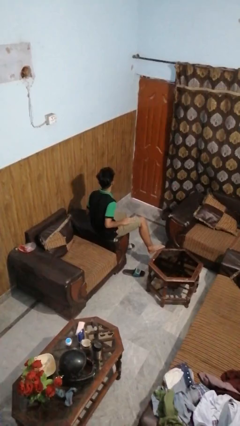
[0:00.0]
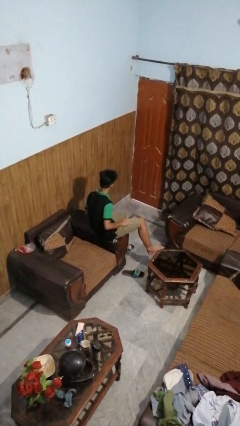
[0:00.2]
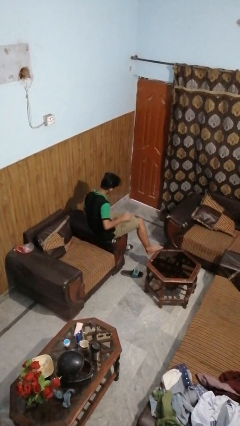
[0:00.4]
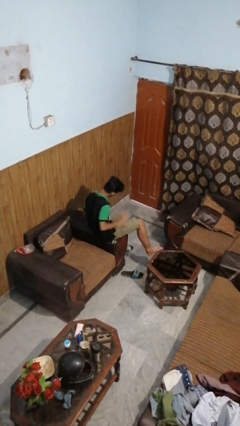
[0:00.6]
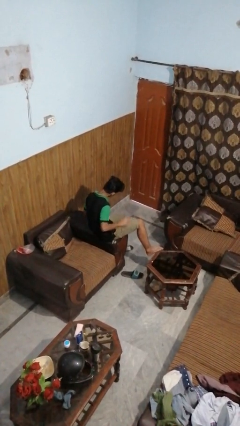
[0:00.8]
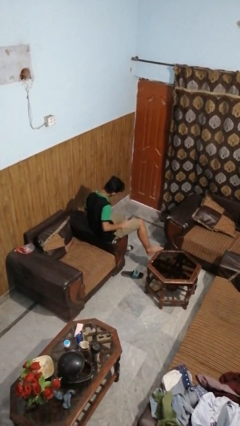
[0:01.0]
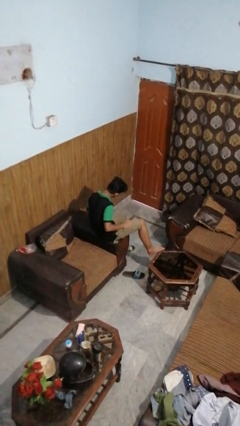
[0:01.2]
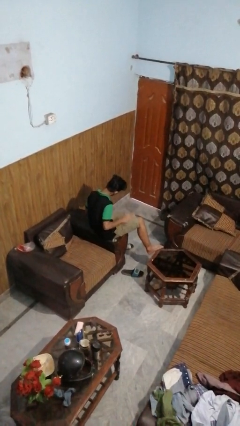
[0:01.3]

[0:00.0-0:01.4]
person slaps hands on thighs

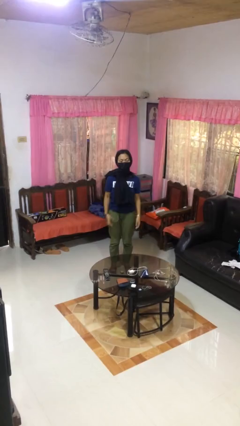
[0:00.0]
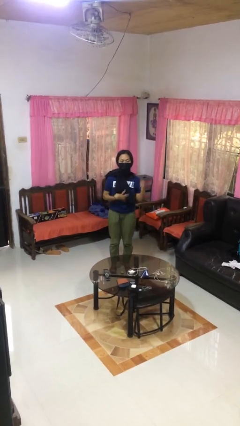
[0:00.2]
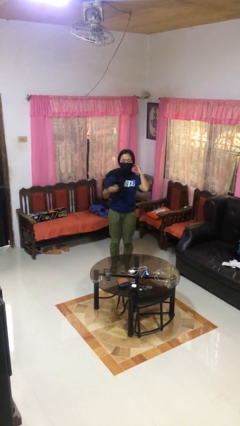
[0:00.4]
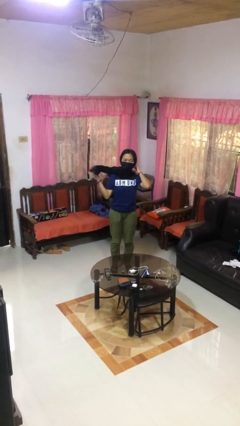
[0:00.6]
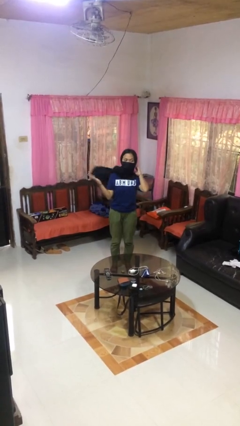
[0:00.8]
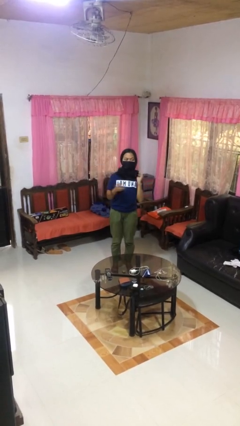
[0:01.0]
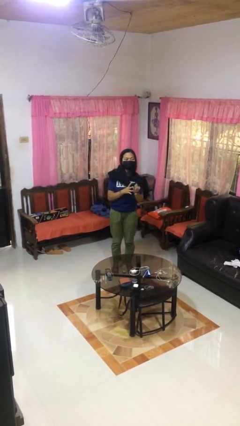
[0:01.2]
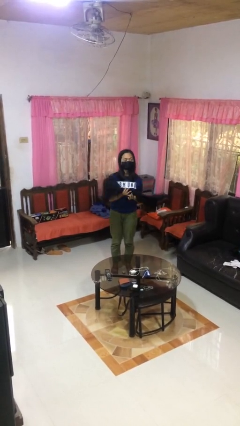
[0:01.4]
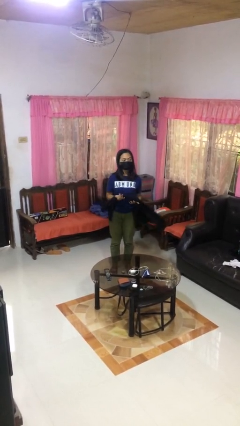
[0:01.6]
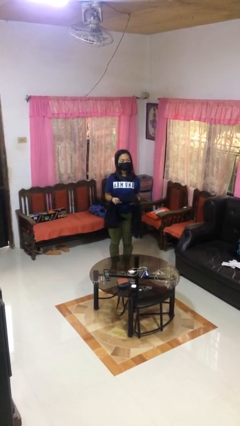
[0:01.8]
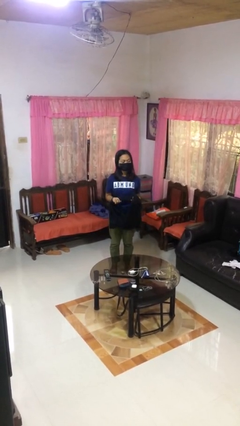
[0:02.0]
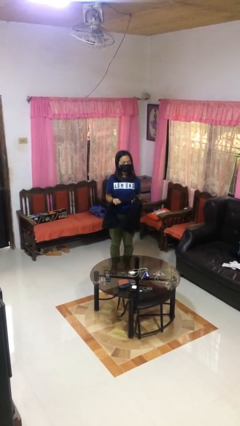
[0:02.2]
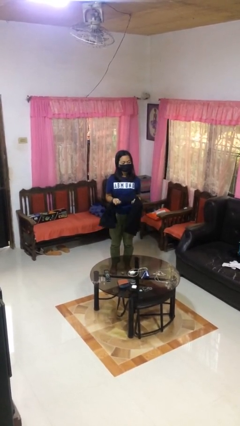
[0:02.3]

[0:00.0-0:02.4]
person takes off scarf

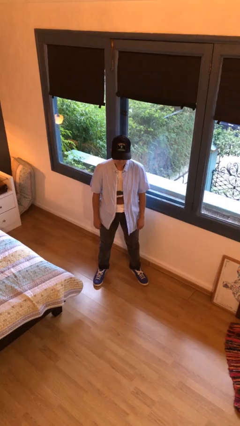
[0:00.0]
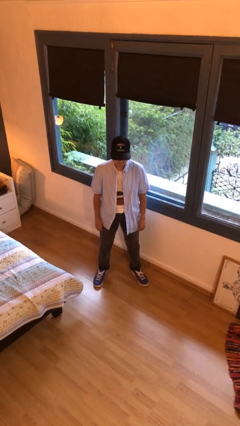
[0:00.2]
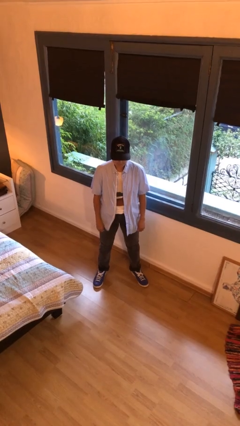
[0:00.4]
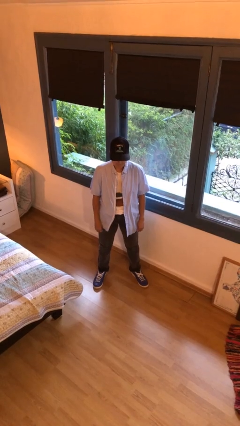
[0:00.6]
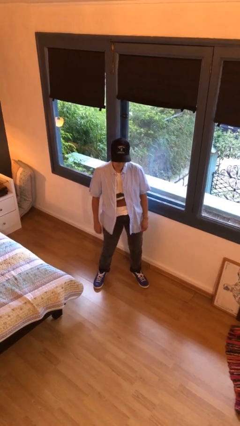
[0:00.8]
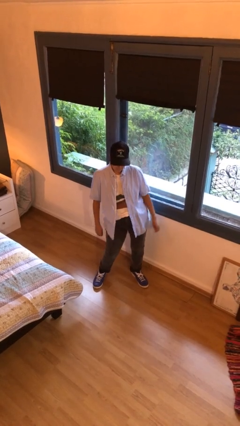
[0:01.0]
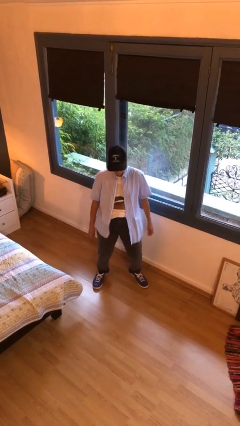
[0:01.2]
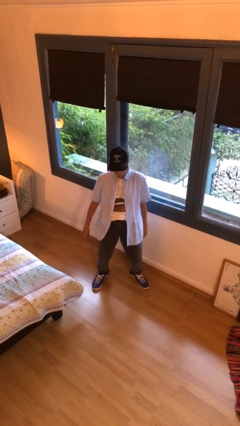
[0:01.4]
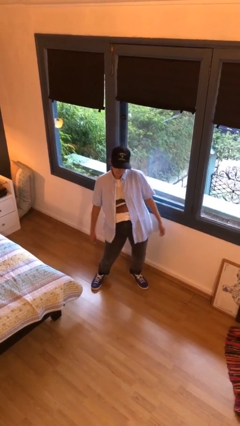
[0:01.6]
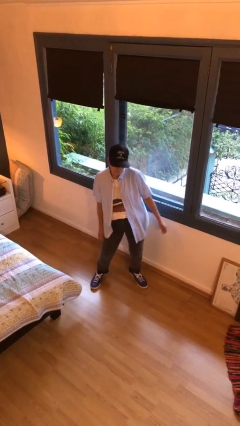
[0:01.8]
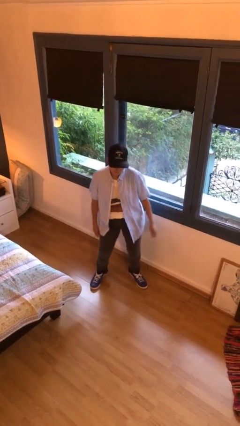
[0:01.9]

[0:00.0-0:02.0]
person wiggles hips

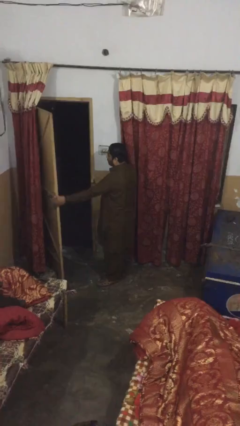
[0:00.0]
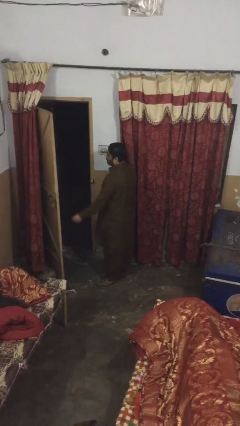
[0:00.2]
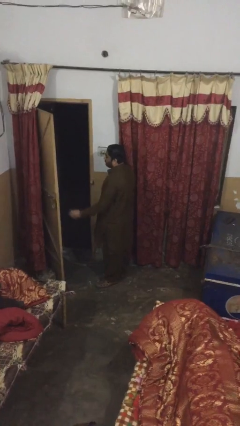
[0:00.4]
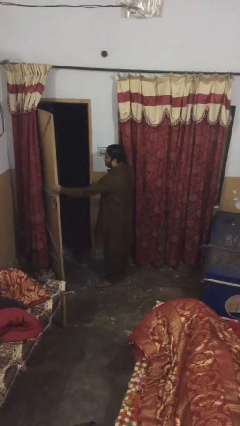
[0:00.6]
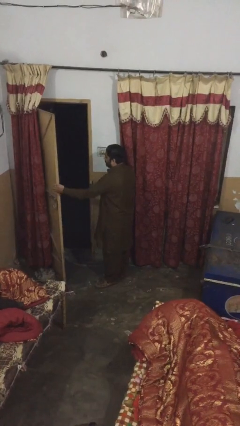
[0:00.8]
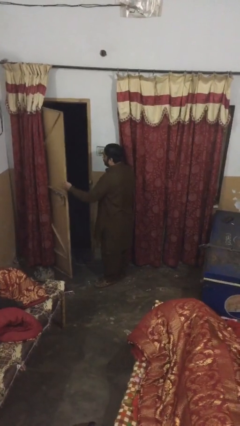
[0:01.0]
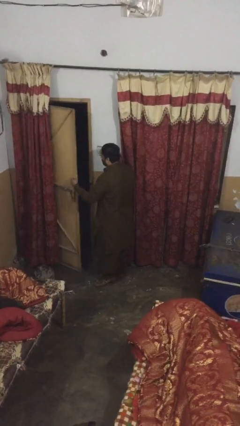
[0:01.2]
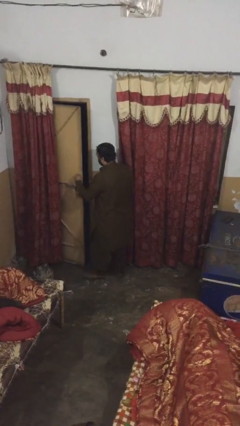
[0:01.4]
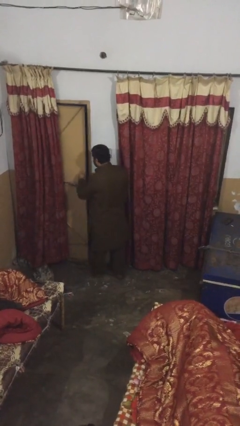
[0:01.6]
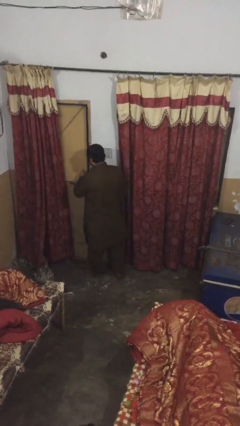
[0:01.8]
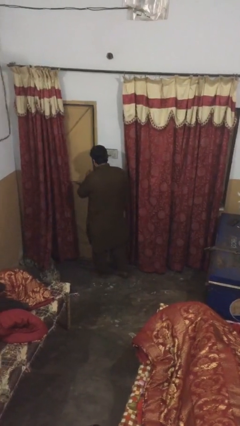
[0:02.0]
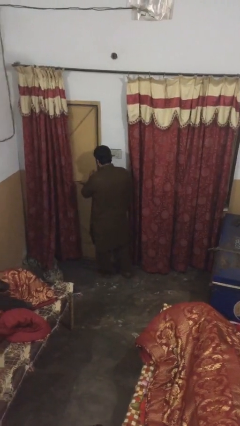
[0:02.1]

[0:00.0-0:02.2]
person closes facility door

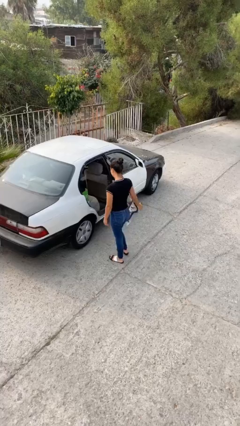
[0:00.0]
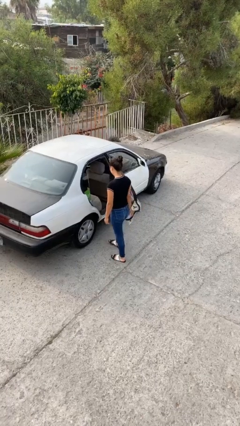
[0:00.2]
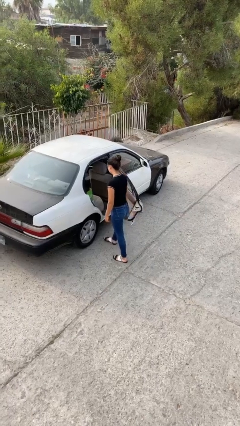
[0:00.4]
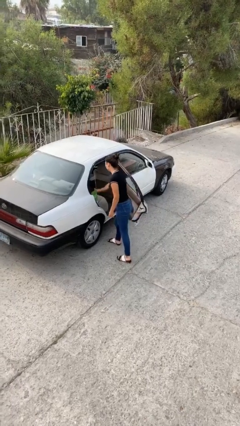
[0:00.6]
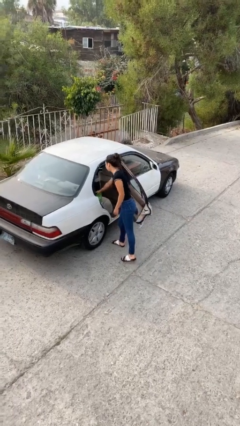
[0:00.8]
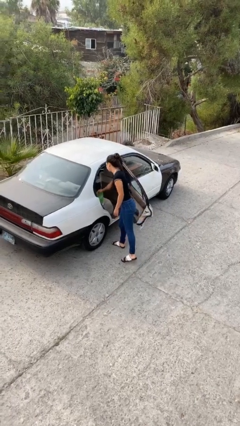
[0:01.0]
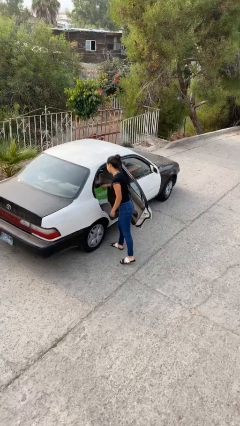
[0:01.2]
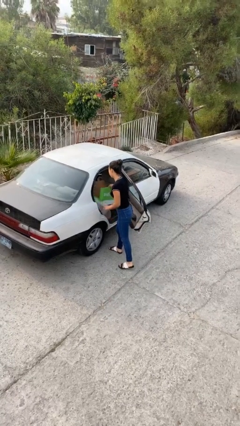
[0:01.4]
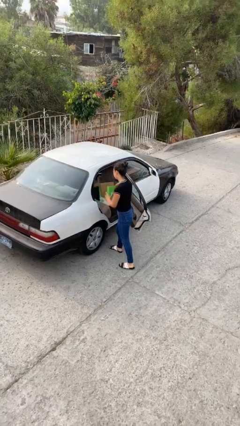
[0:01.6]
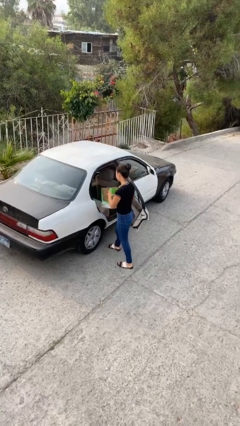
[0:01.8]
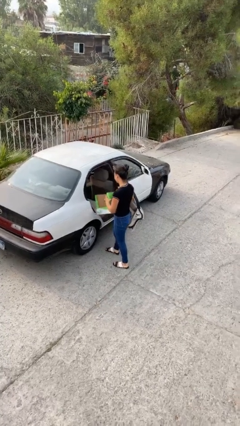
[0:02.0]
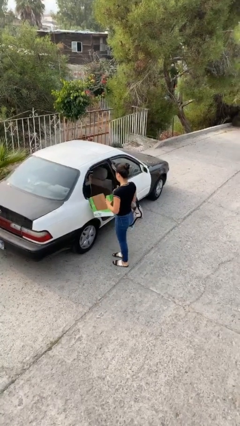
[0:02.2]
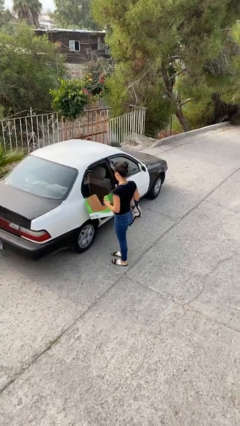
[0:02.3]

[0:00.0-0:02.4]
person unloads car

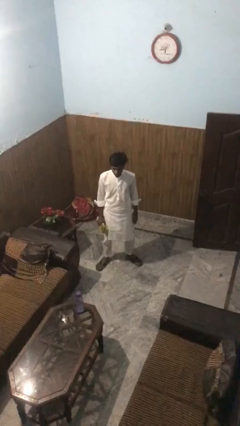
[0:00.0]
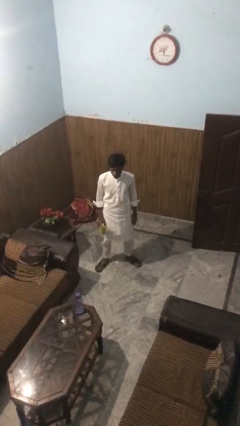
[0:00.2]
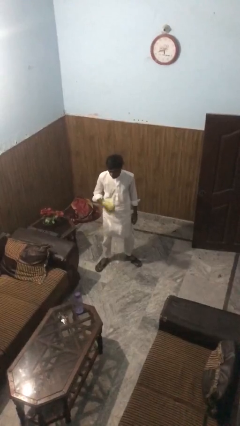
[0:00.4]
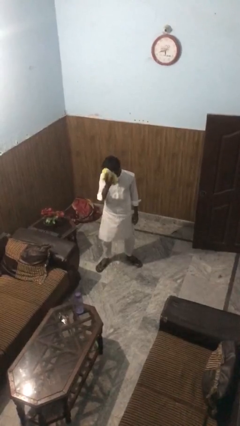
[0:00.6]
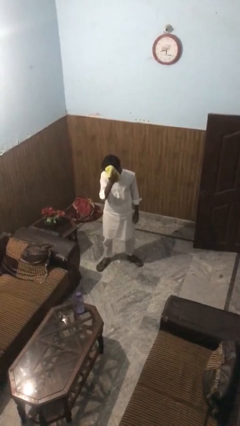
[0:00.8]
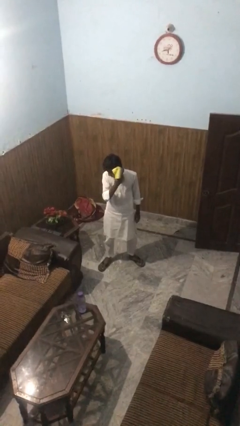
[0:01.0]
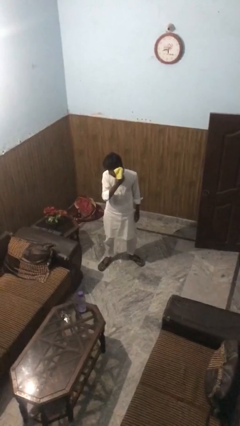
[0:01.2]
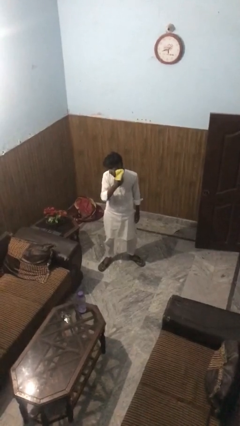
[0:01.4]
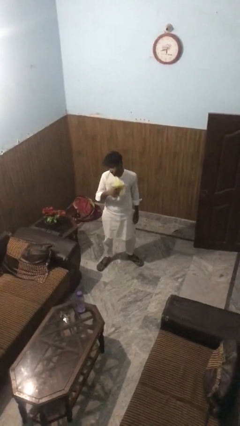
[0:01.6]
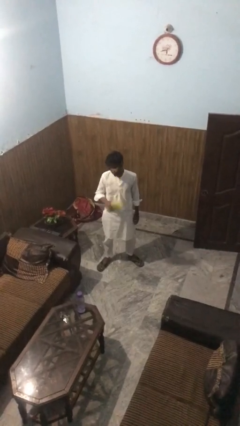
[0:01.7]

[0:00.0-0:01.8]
person wipes mouth with napkin

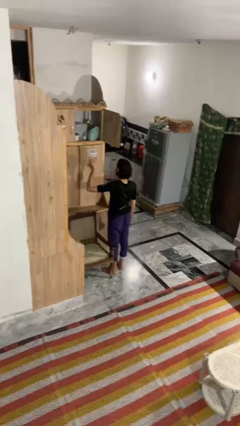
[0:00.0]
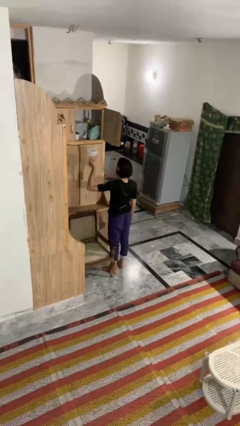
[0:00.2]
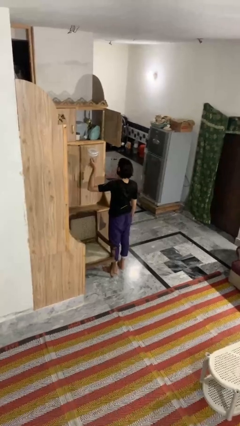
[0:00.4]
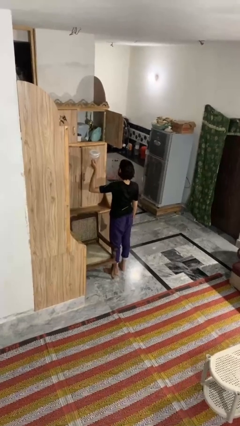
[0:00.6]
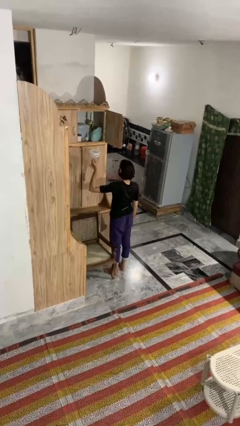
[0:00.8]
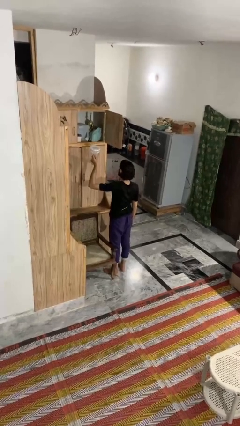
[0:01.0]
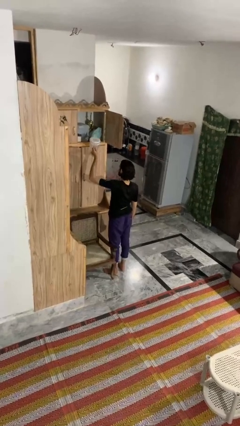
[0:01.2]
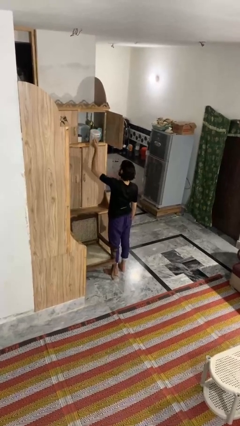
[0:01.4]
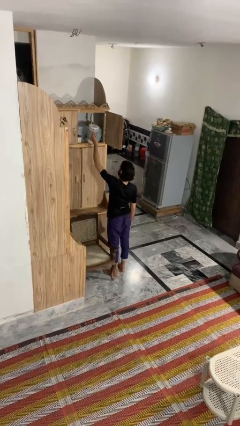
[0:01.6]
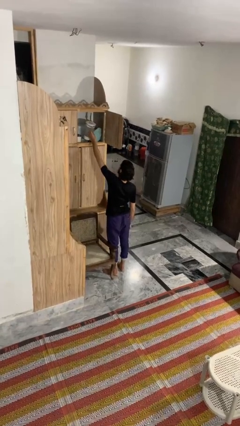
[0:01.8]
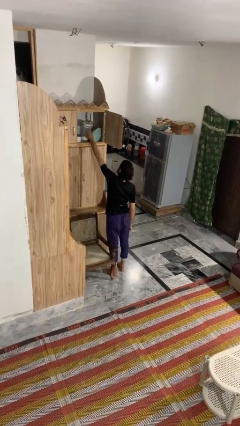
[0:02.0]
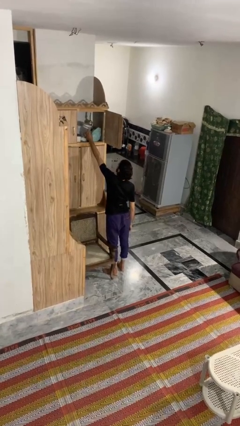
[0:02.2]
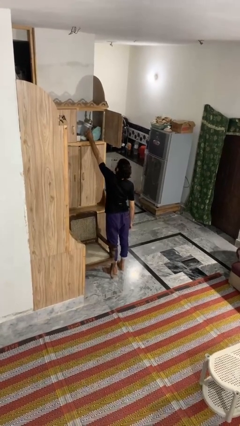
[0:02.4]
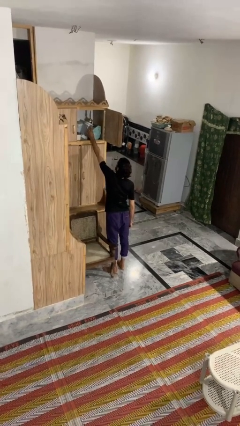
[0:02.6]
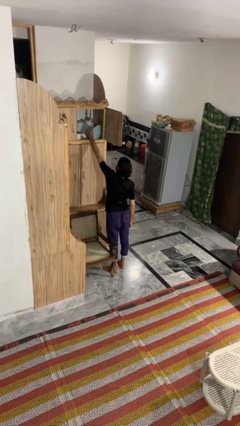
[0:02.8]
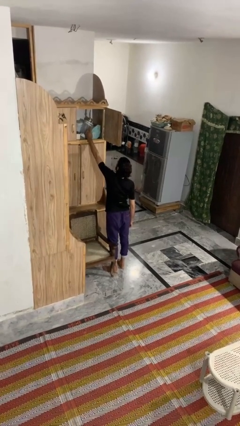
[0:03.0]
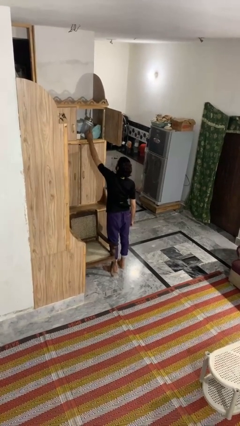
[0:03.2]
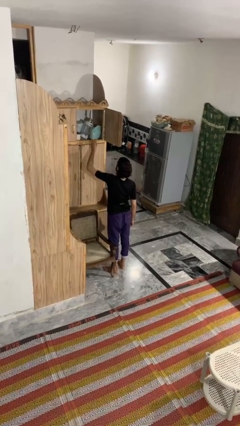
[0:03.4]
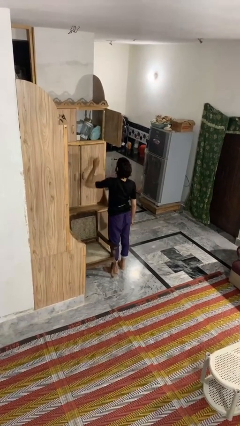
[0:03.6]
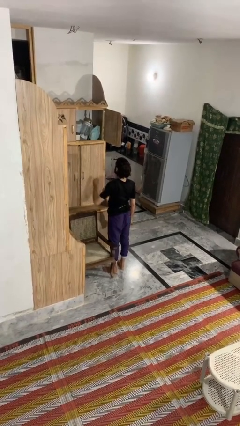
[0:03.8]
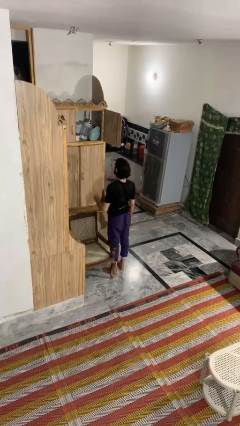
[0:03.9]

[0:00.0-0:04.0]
person puts down object on shelf

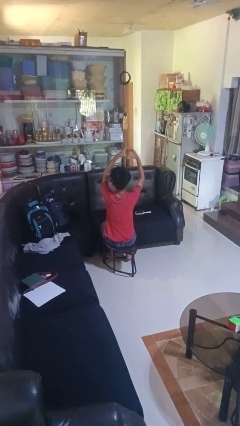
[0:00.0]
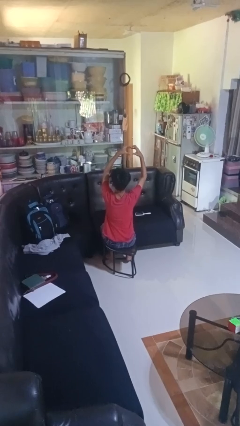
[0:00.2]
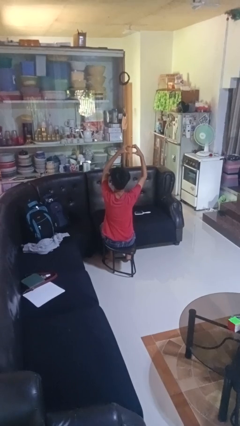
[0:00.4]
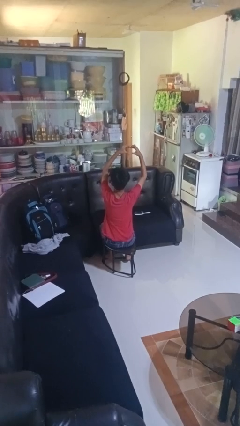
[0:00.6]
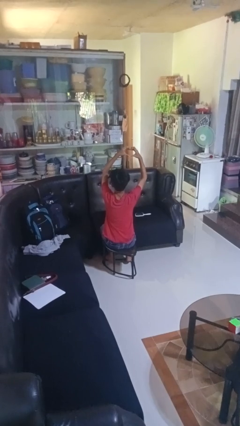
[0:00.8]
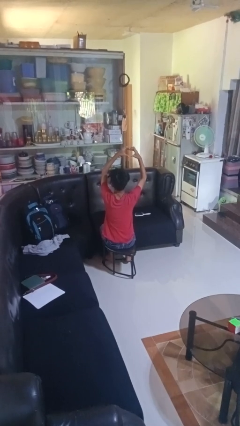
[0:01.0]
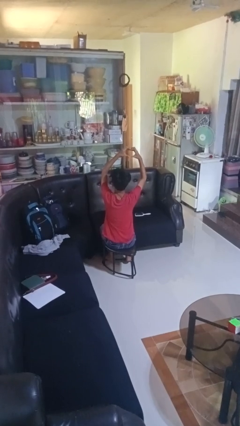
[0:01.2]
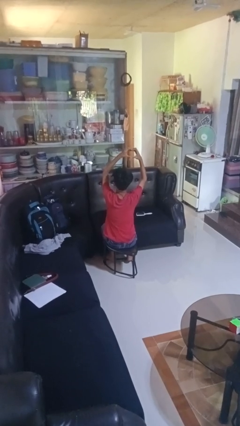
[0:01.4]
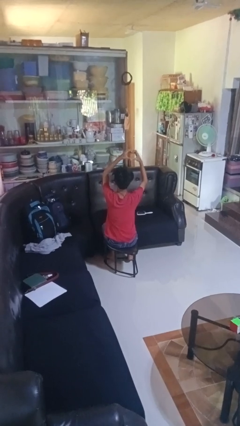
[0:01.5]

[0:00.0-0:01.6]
person gestures heart
